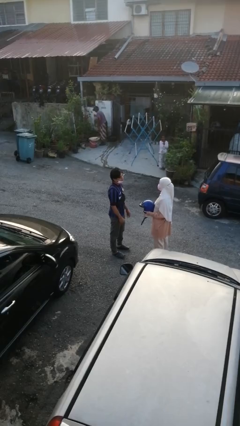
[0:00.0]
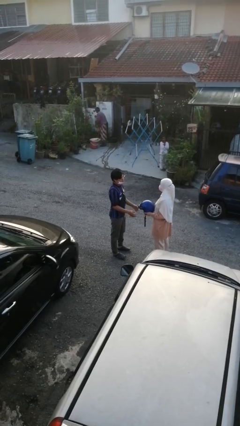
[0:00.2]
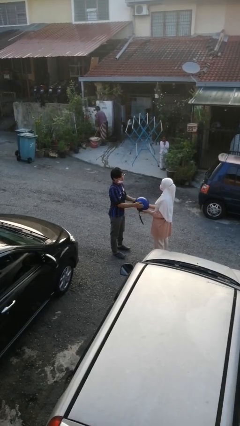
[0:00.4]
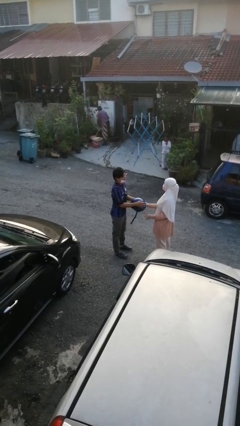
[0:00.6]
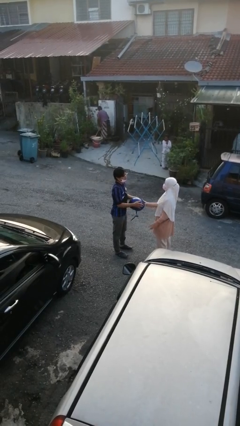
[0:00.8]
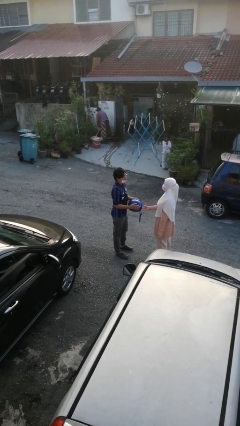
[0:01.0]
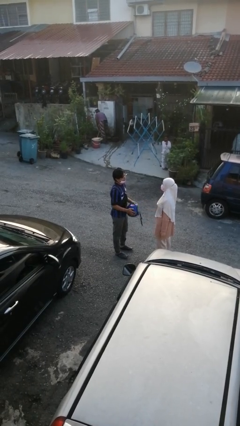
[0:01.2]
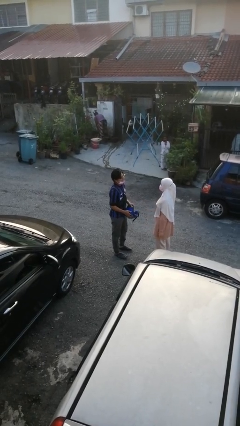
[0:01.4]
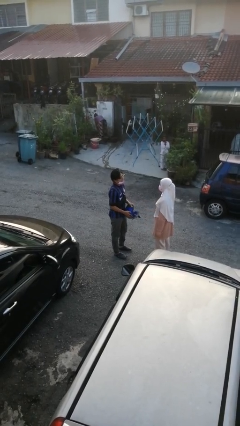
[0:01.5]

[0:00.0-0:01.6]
person transfers object to person

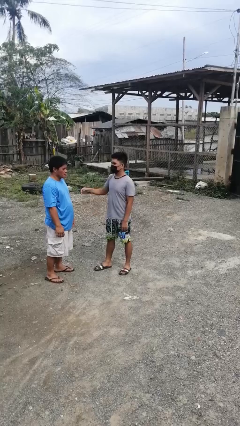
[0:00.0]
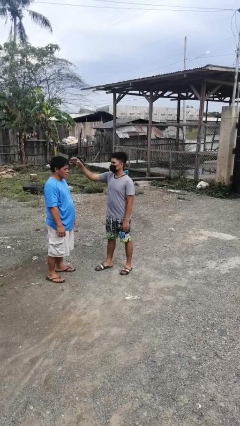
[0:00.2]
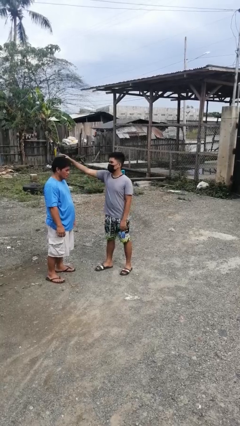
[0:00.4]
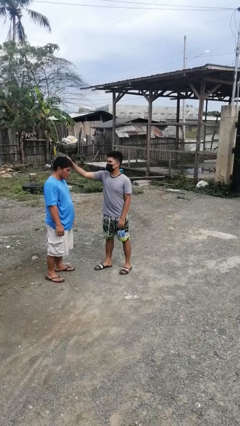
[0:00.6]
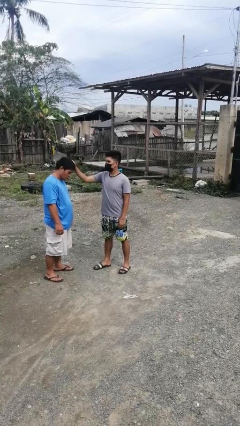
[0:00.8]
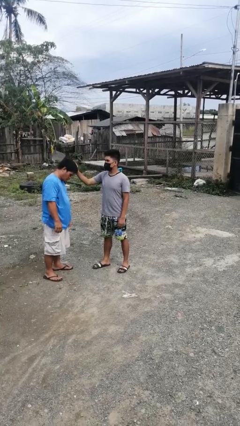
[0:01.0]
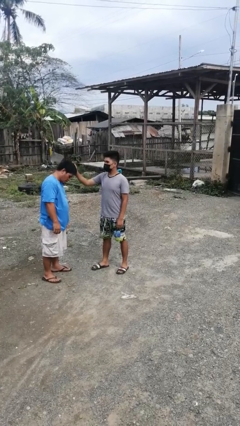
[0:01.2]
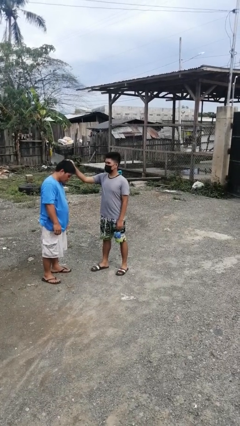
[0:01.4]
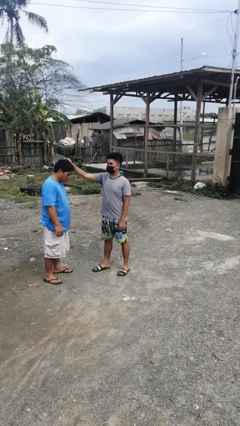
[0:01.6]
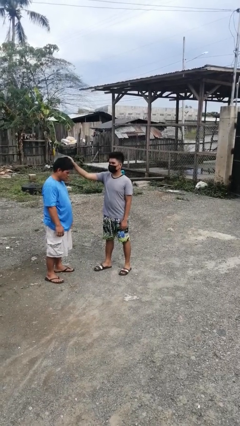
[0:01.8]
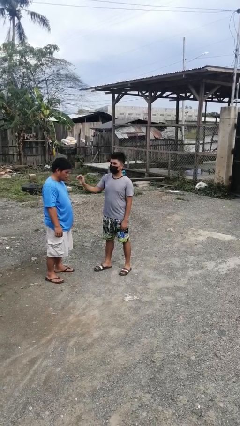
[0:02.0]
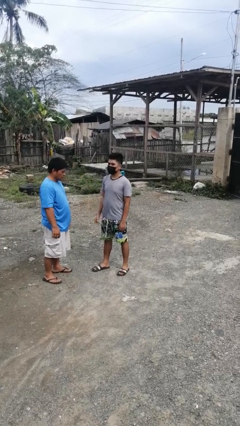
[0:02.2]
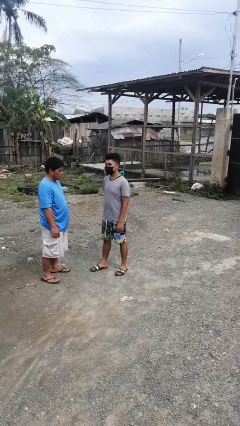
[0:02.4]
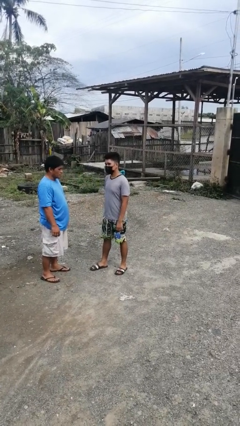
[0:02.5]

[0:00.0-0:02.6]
person grabs person by hair

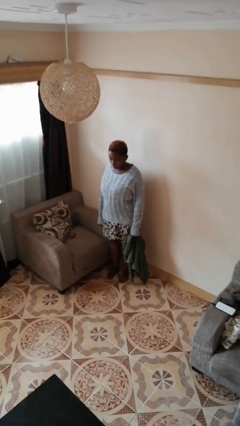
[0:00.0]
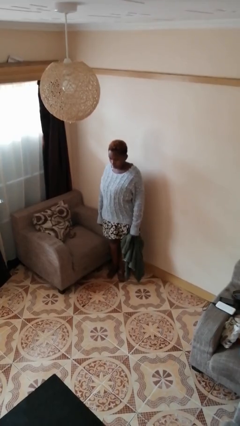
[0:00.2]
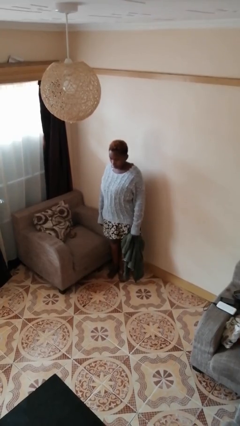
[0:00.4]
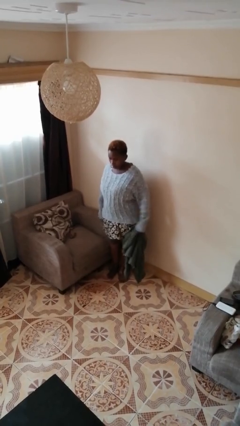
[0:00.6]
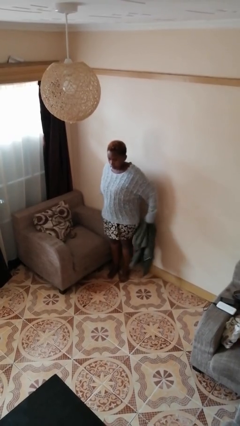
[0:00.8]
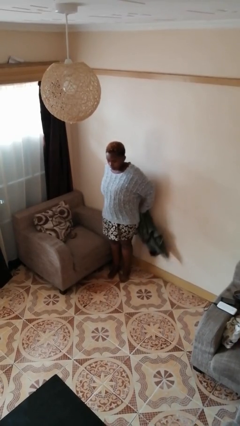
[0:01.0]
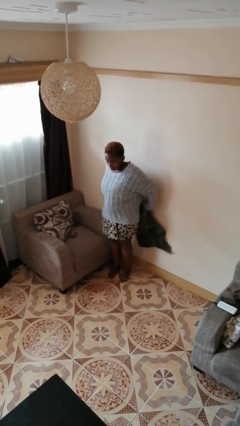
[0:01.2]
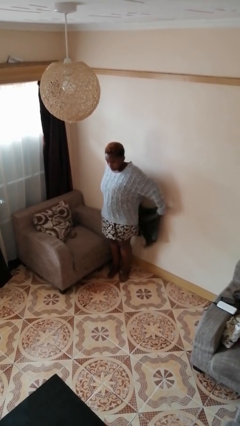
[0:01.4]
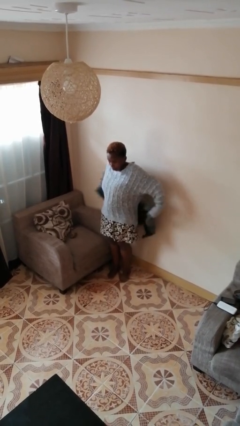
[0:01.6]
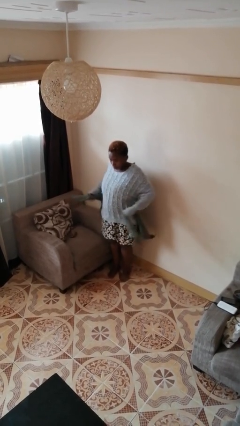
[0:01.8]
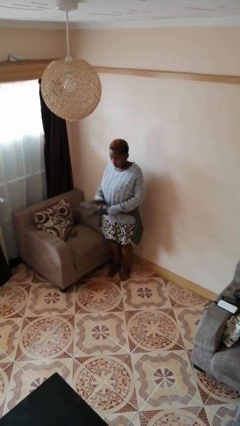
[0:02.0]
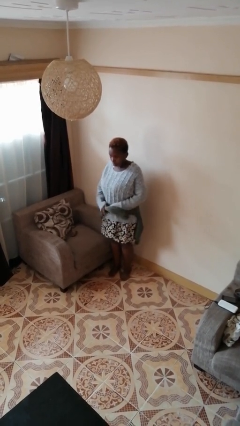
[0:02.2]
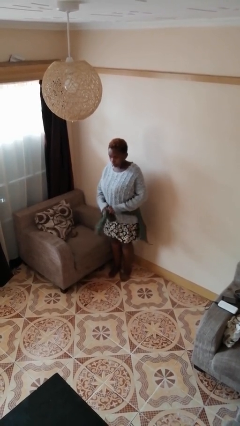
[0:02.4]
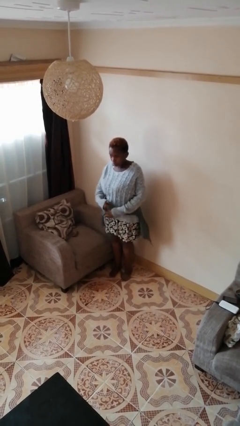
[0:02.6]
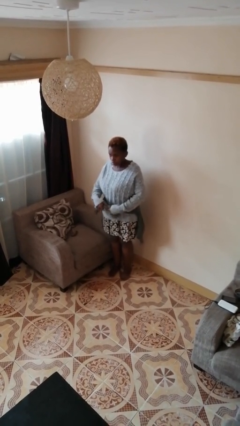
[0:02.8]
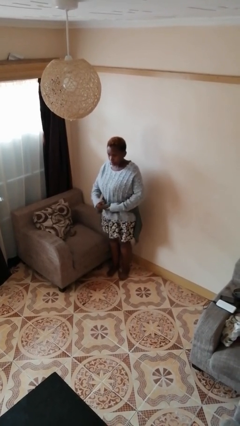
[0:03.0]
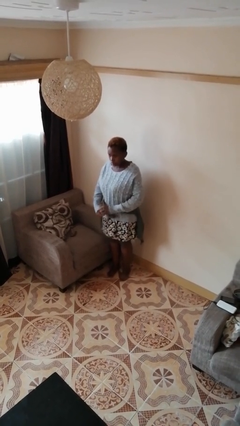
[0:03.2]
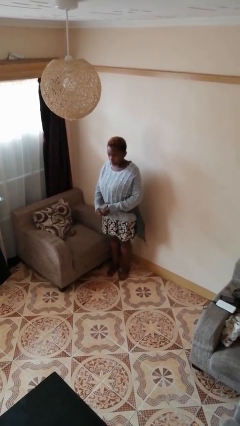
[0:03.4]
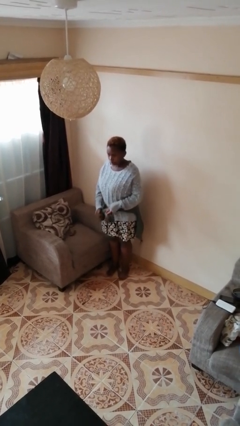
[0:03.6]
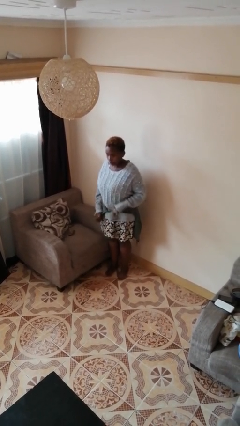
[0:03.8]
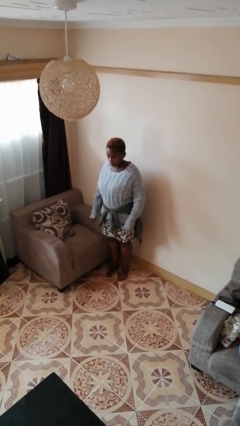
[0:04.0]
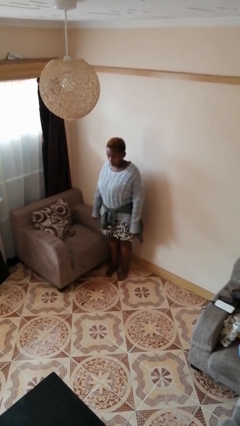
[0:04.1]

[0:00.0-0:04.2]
person ties jacket around waist

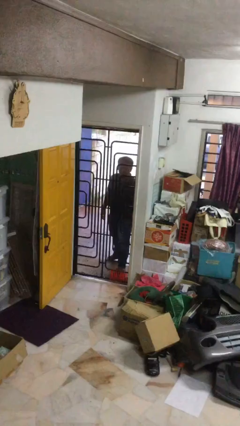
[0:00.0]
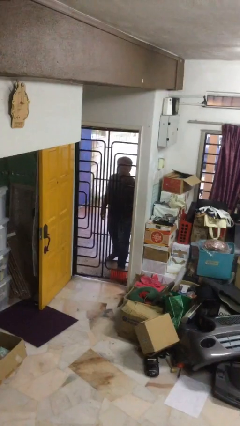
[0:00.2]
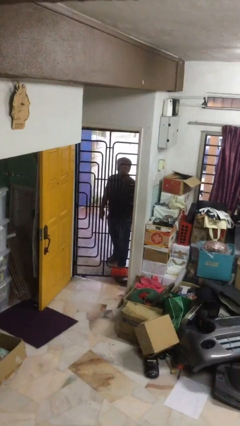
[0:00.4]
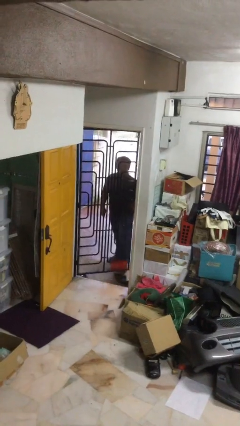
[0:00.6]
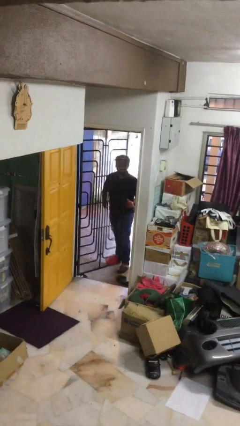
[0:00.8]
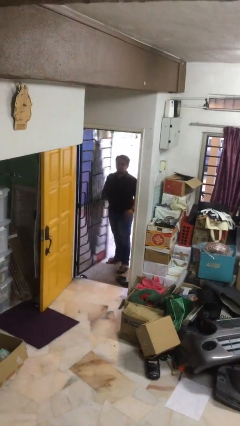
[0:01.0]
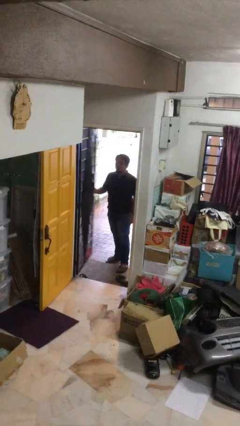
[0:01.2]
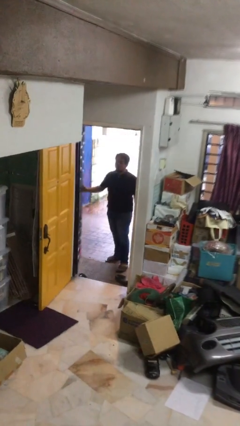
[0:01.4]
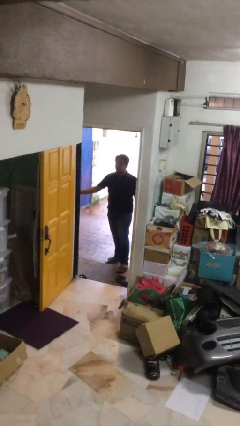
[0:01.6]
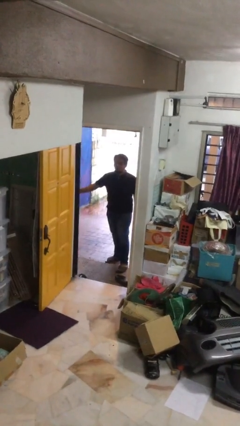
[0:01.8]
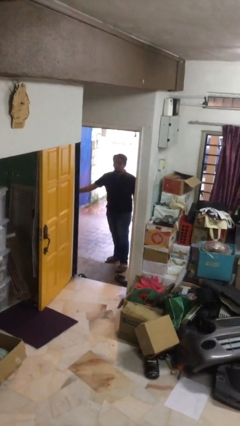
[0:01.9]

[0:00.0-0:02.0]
person opens facility door

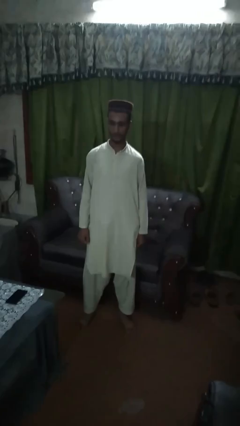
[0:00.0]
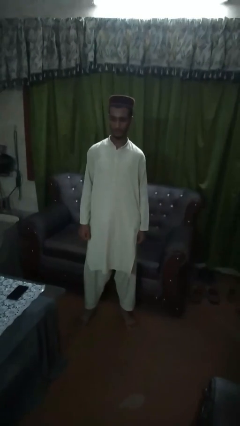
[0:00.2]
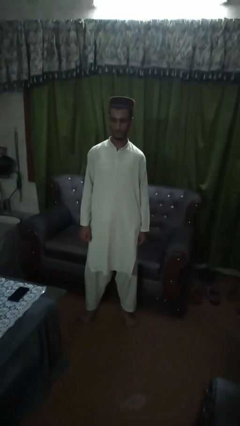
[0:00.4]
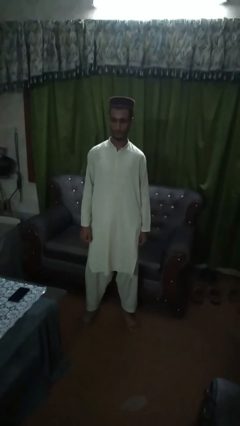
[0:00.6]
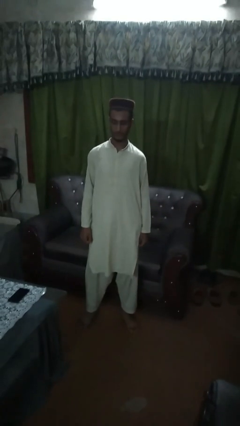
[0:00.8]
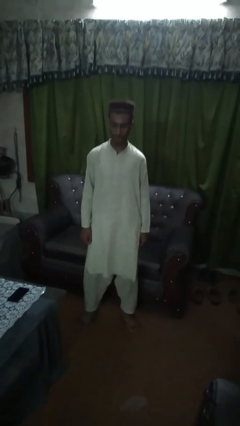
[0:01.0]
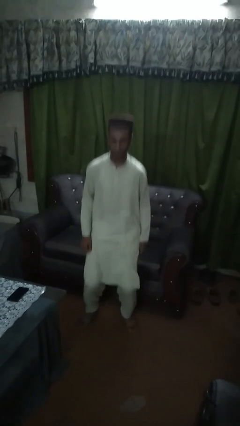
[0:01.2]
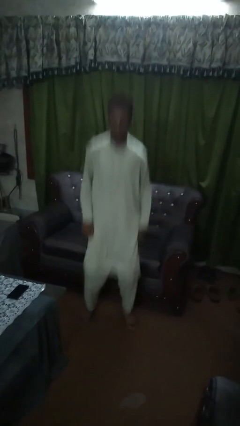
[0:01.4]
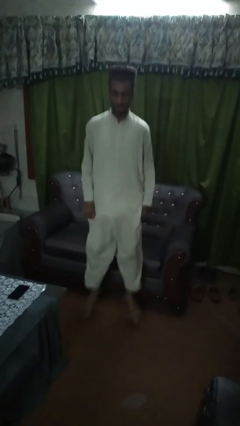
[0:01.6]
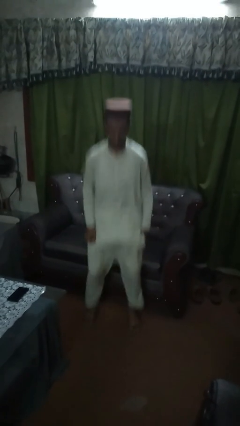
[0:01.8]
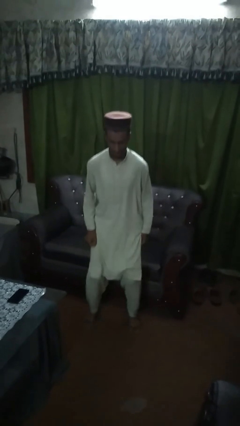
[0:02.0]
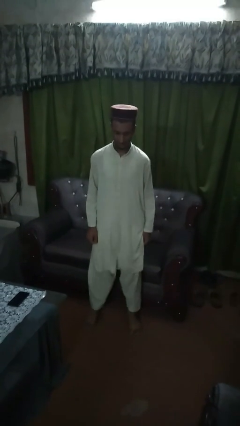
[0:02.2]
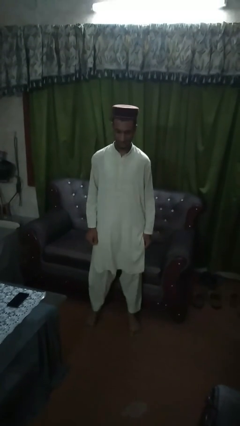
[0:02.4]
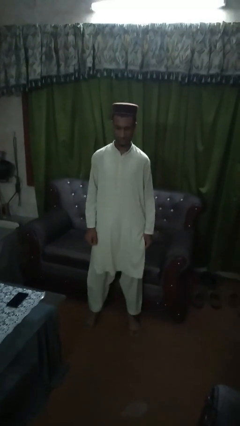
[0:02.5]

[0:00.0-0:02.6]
person jumps

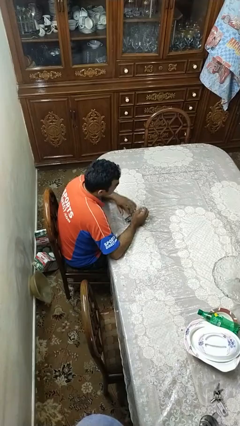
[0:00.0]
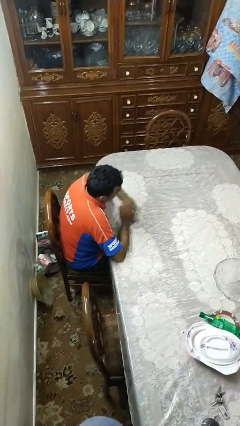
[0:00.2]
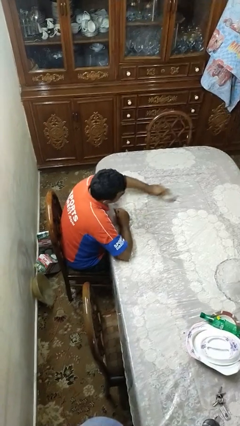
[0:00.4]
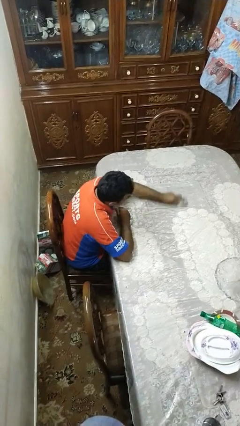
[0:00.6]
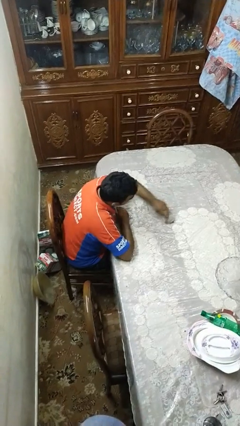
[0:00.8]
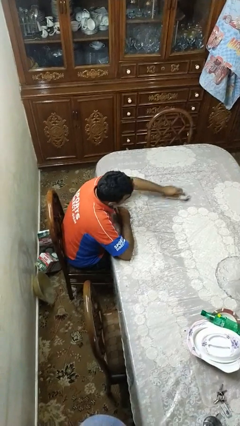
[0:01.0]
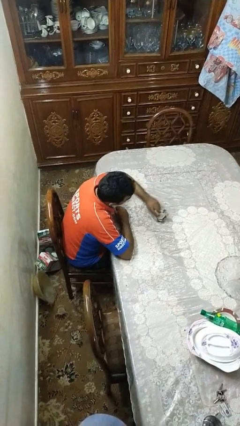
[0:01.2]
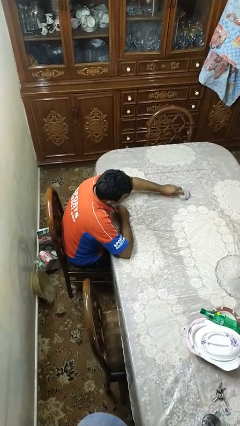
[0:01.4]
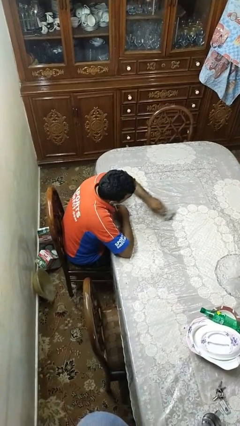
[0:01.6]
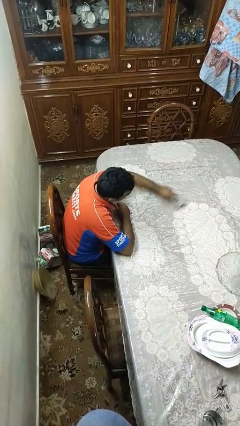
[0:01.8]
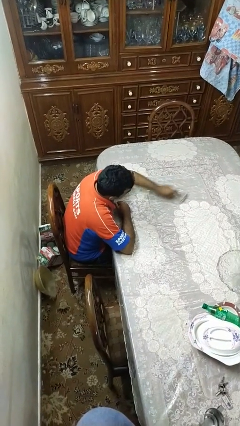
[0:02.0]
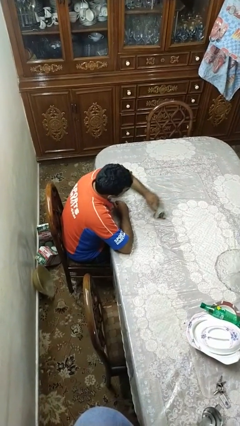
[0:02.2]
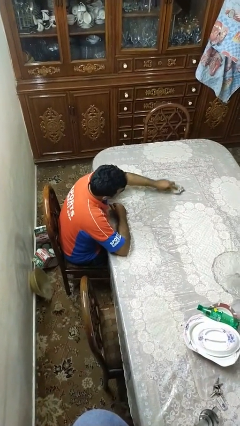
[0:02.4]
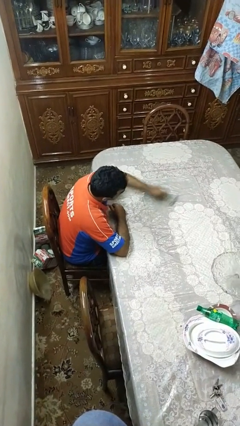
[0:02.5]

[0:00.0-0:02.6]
person cleans table with rag

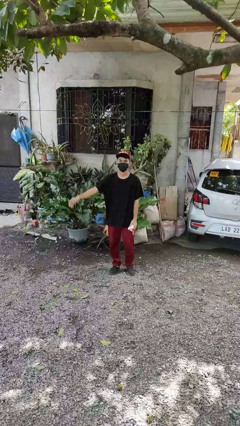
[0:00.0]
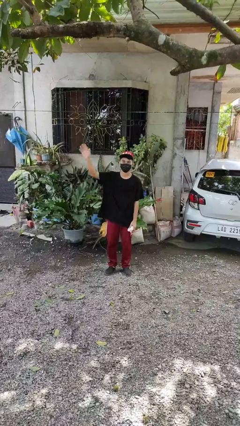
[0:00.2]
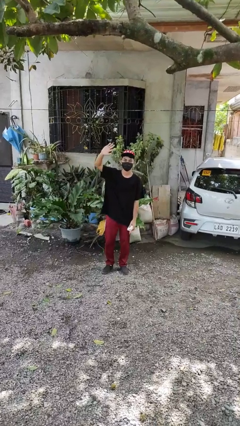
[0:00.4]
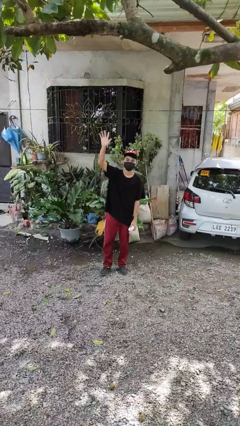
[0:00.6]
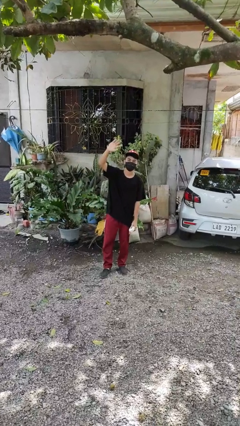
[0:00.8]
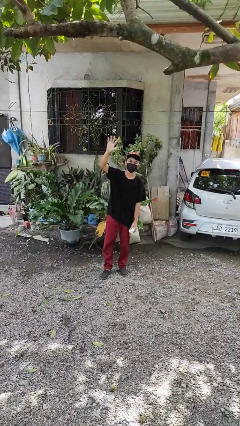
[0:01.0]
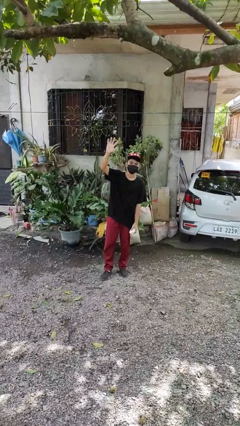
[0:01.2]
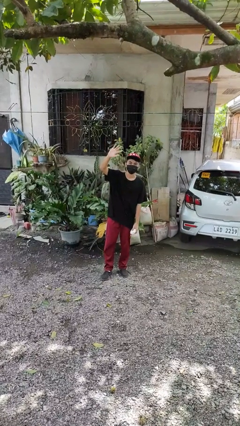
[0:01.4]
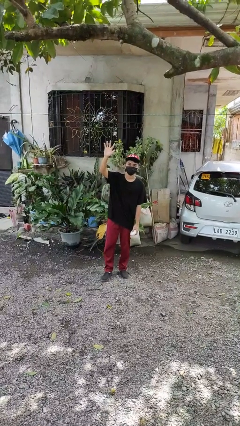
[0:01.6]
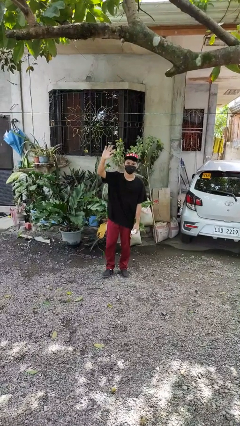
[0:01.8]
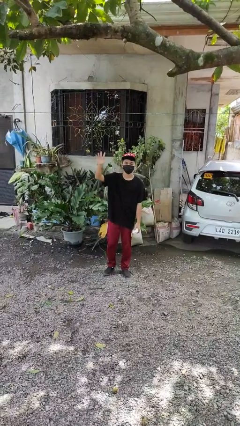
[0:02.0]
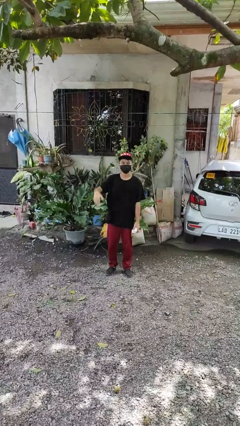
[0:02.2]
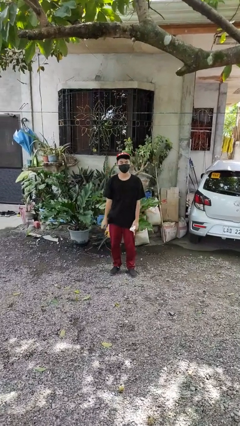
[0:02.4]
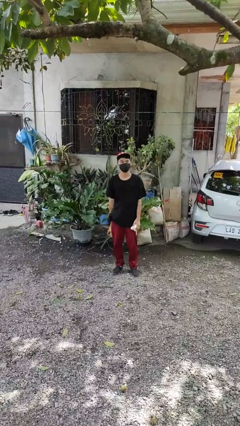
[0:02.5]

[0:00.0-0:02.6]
person waves at person
